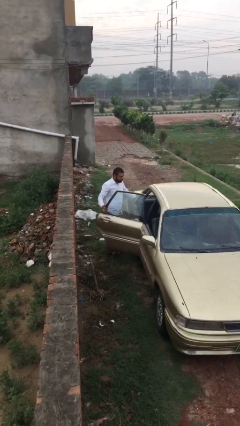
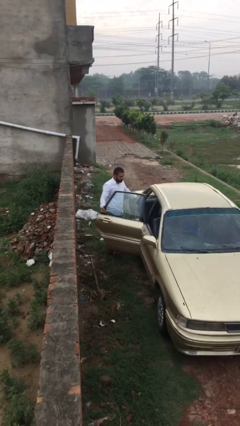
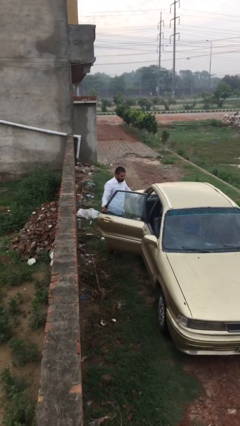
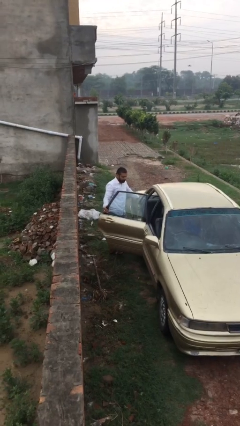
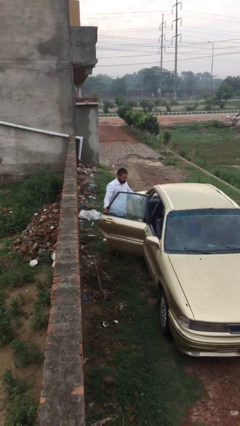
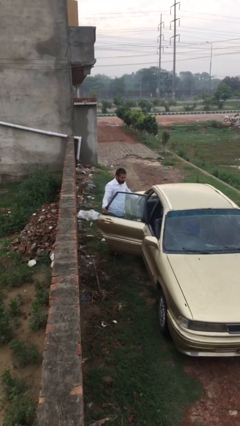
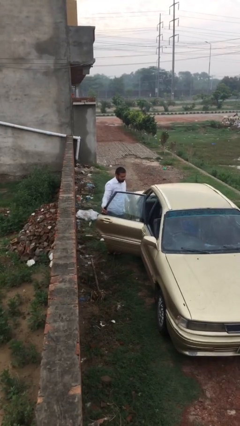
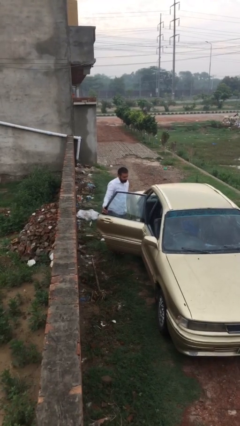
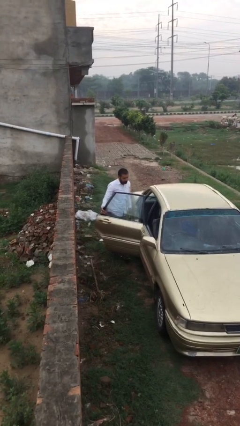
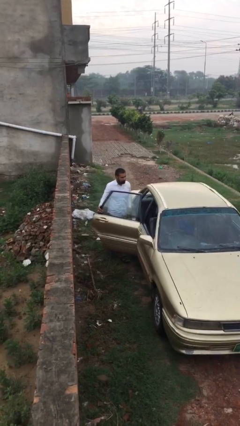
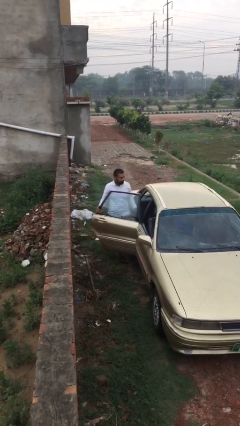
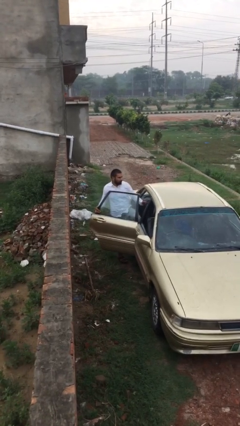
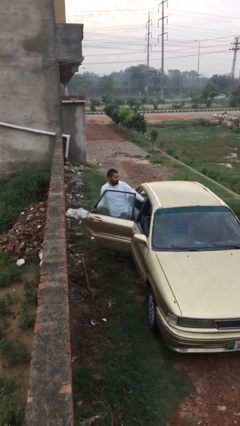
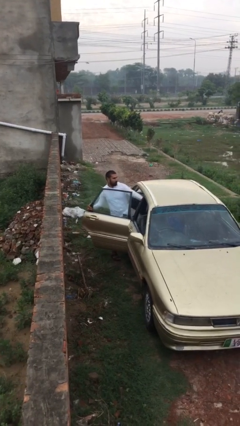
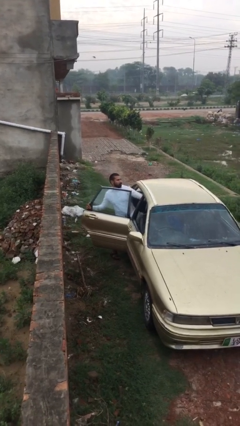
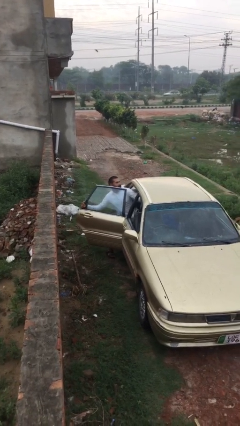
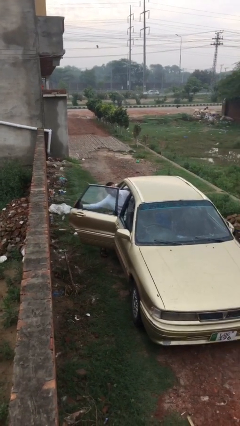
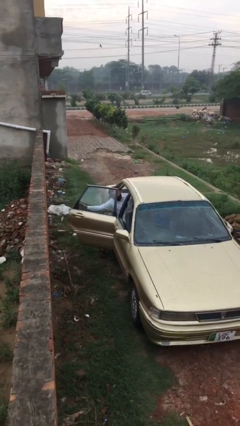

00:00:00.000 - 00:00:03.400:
person enters car

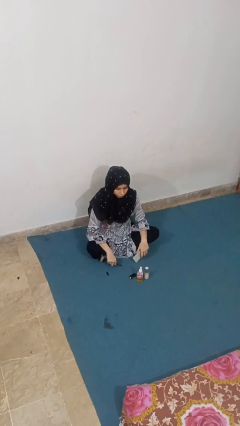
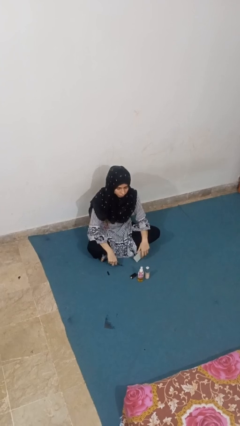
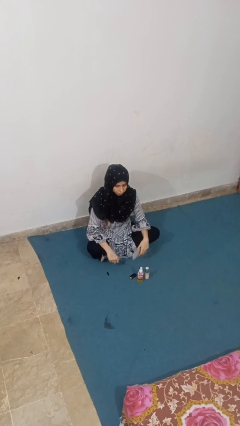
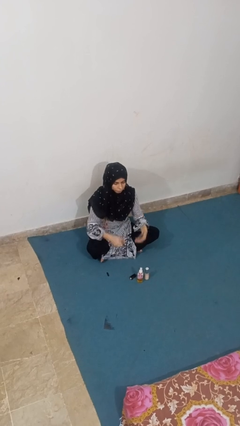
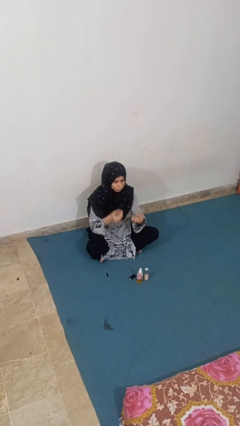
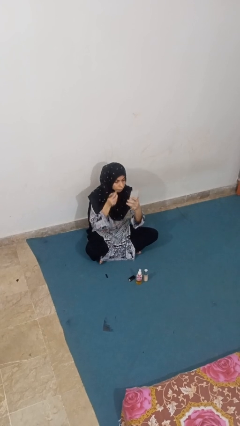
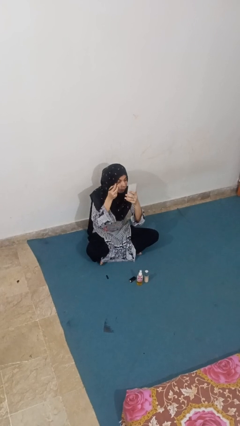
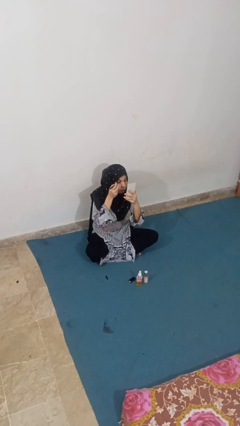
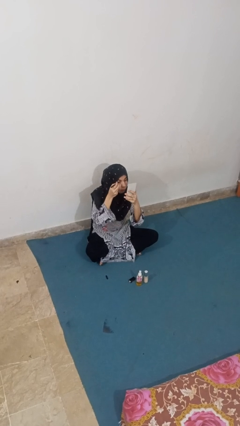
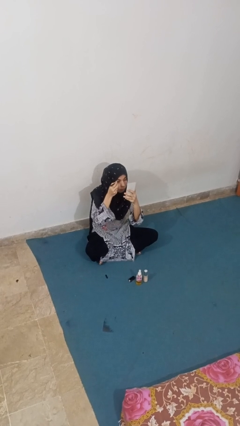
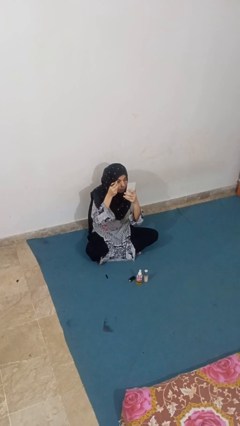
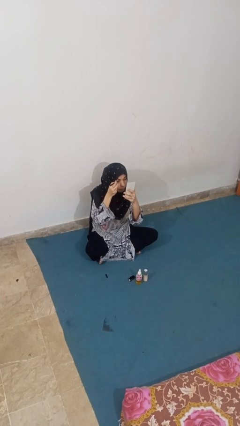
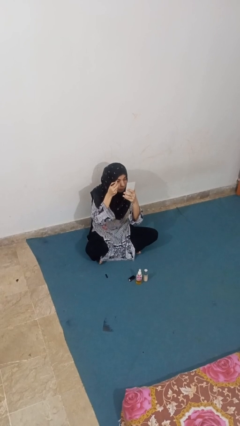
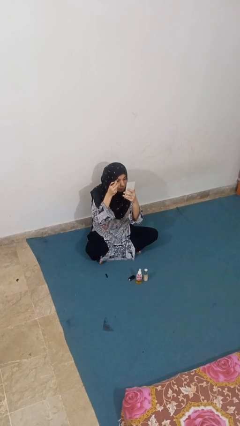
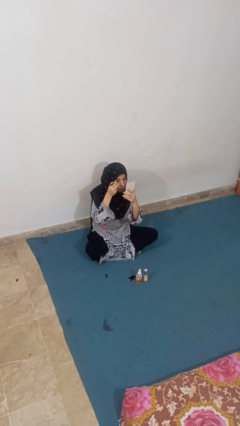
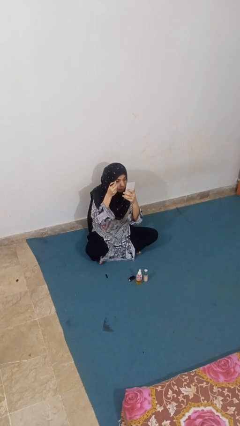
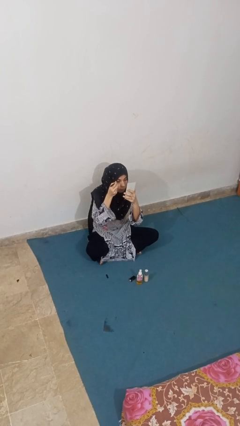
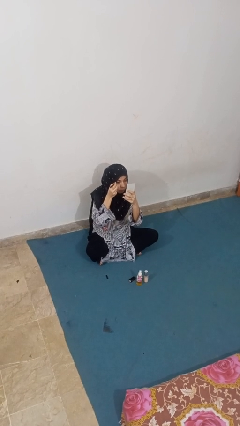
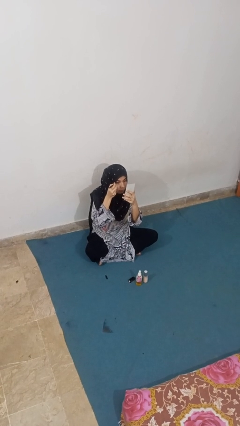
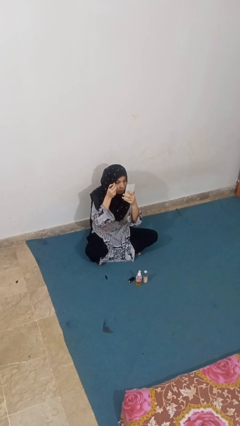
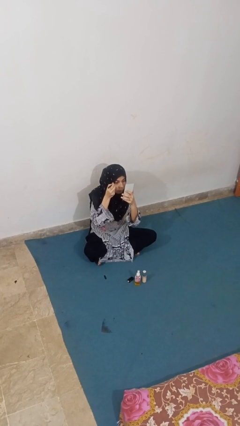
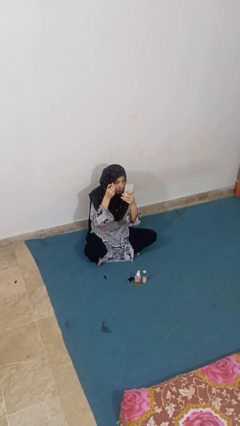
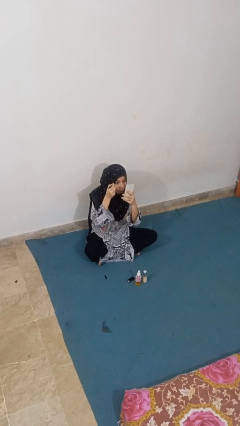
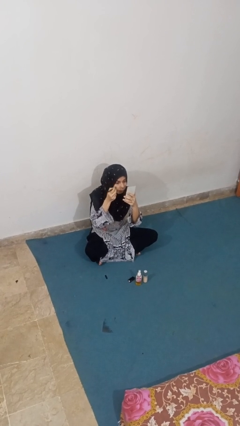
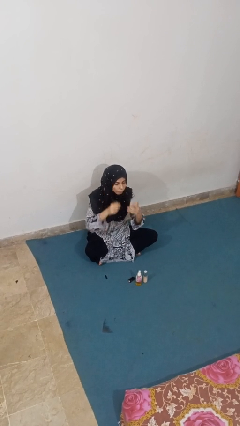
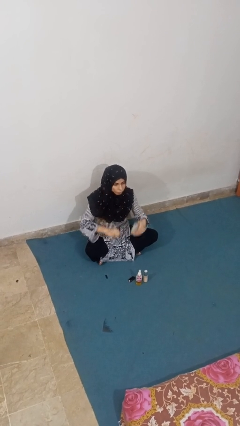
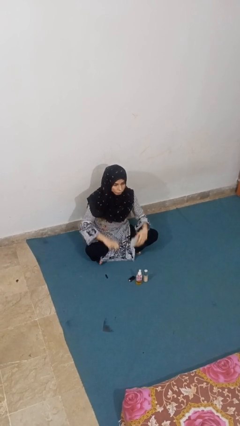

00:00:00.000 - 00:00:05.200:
person applies eye makeup

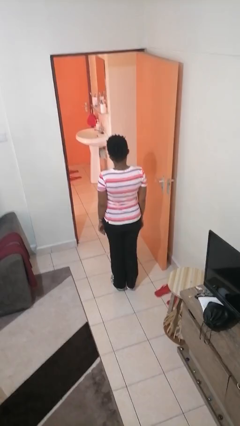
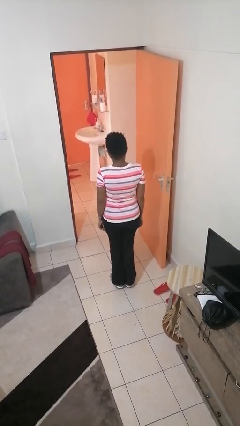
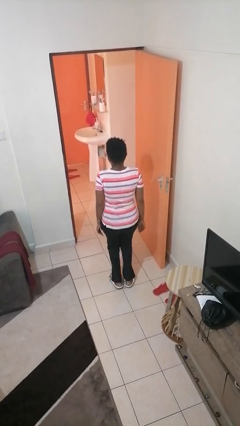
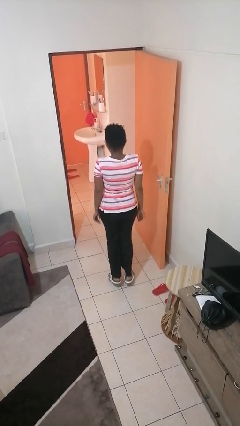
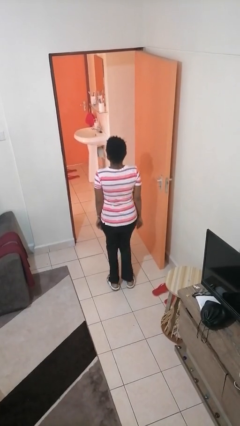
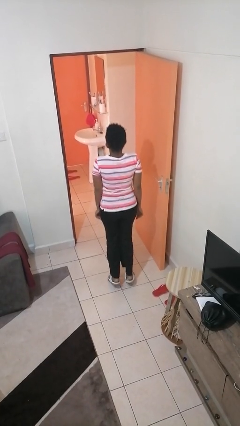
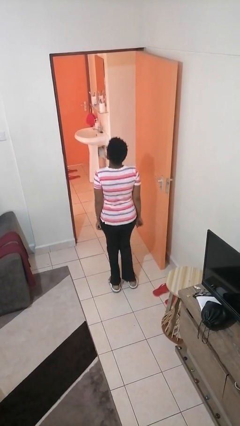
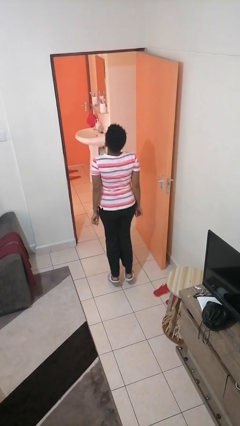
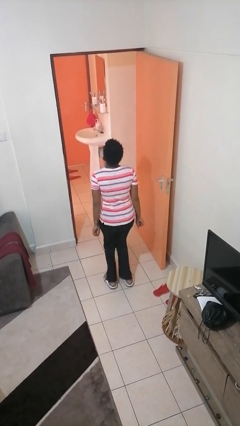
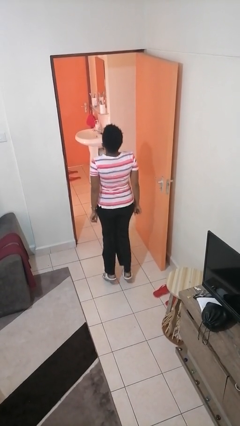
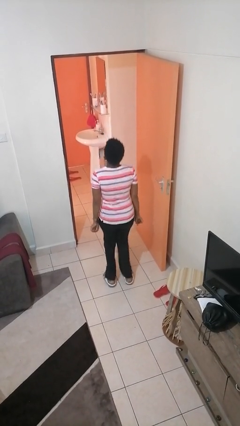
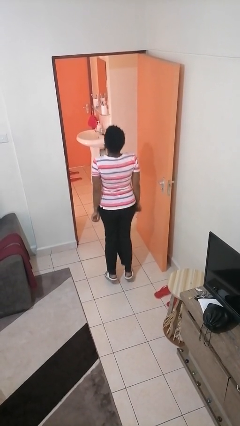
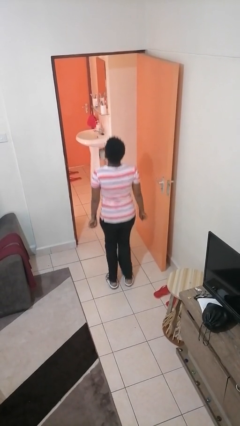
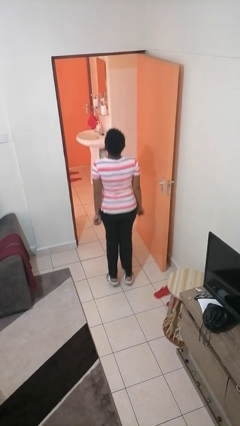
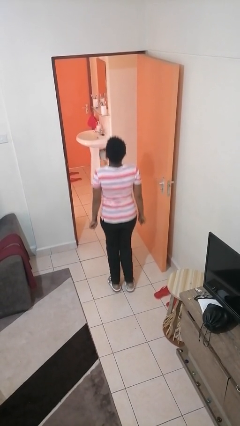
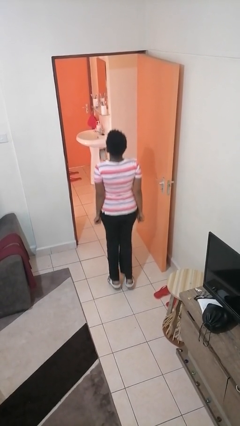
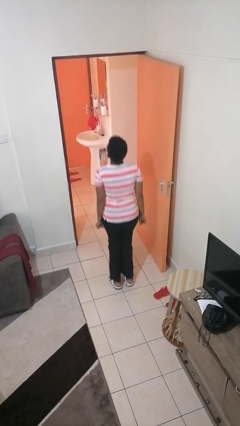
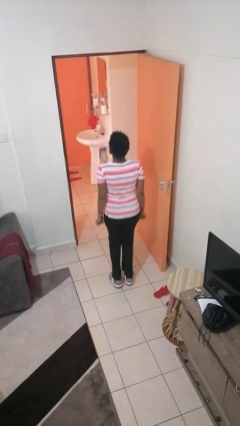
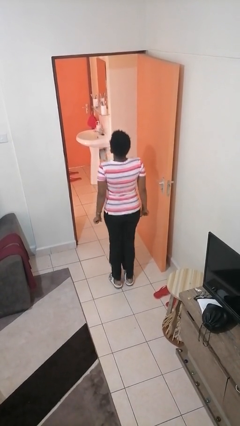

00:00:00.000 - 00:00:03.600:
person jumps

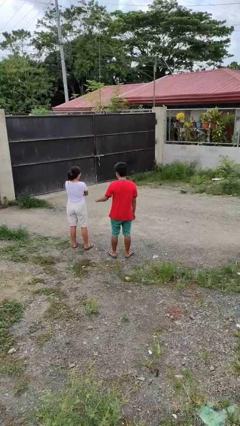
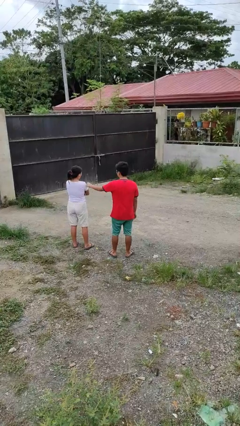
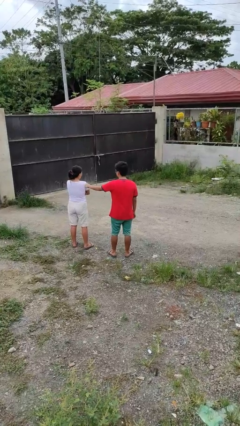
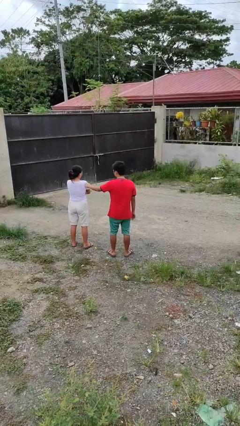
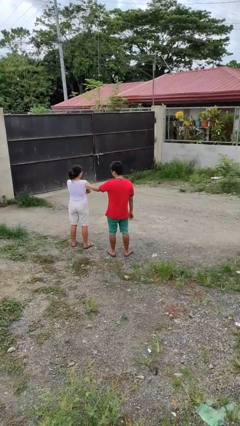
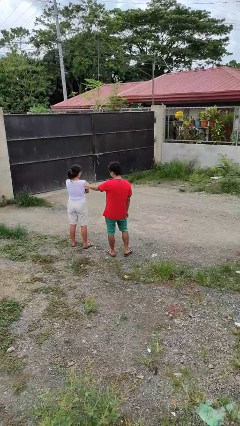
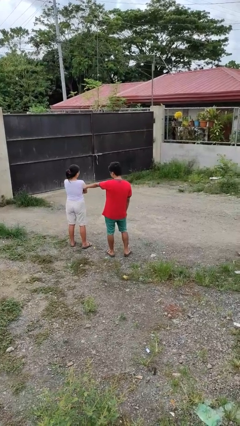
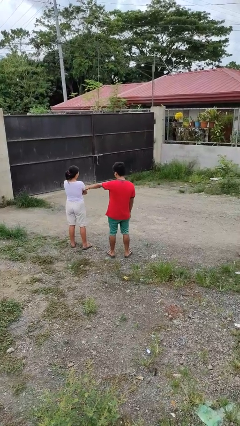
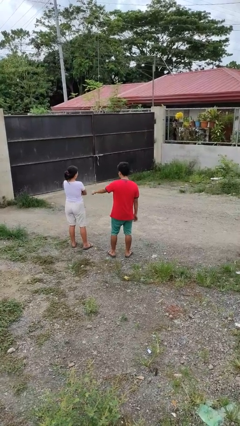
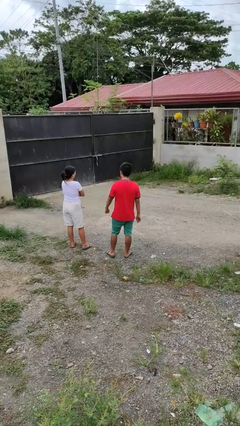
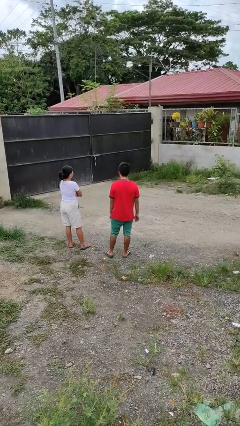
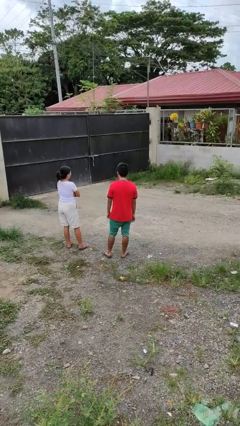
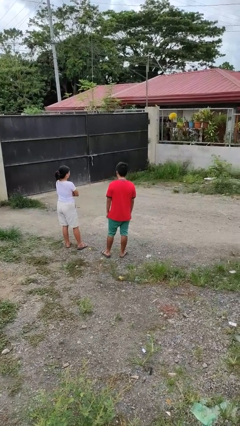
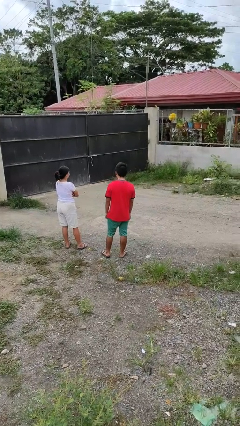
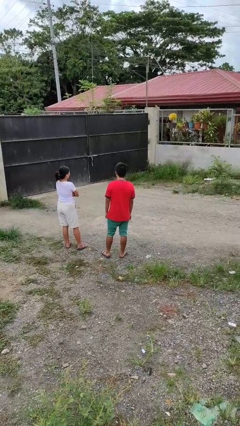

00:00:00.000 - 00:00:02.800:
person pounds shoulders of person

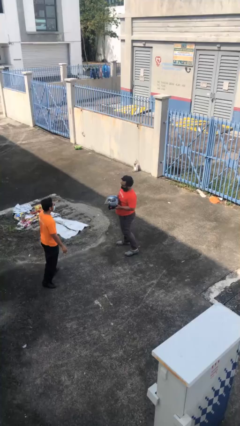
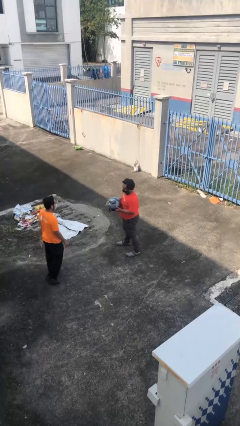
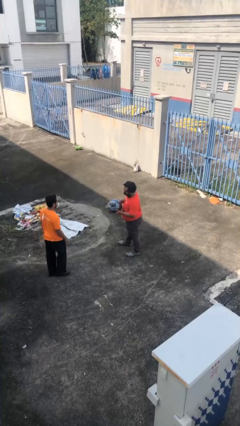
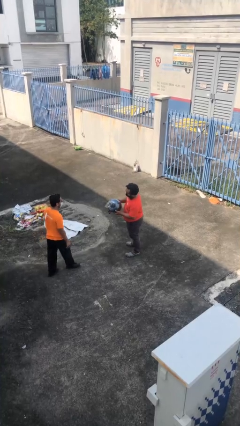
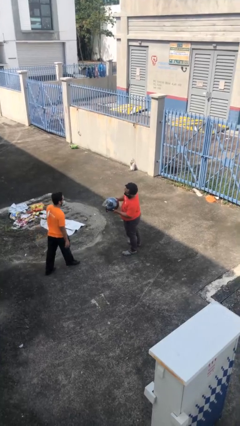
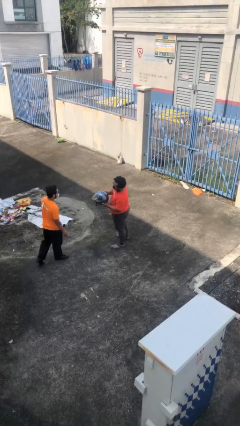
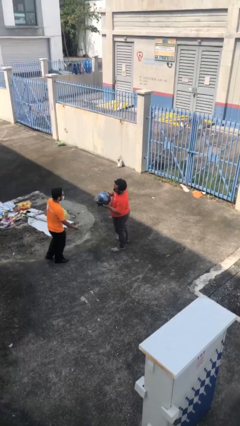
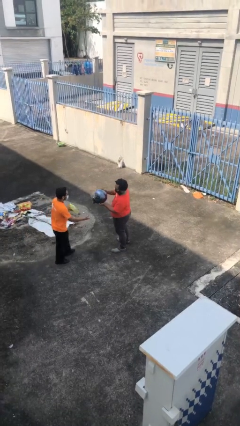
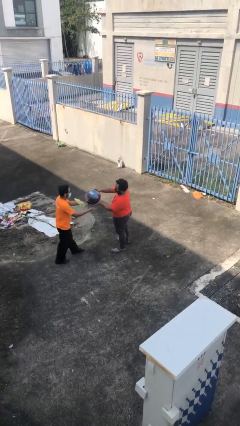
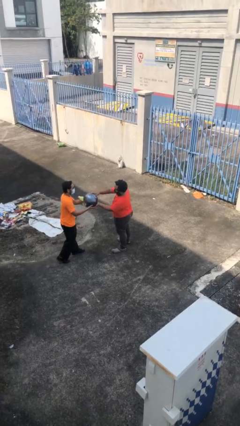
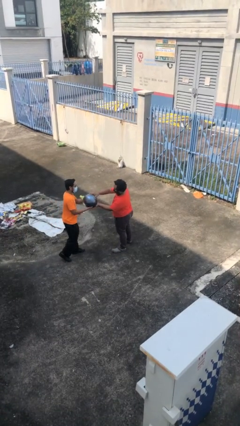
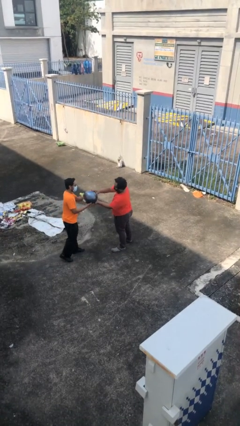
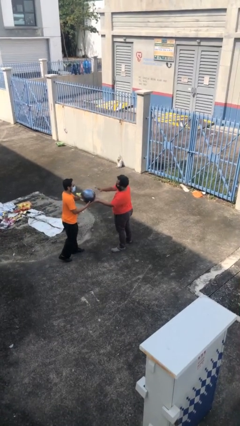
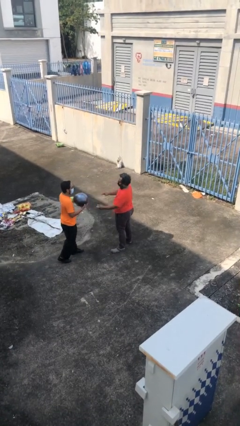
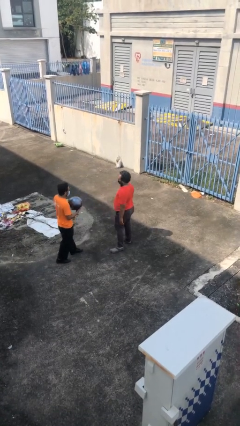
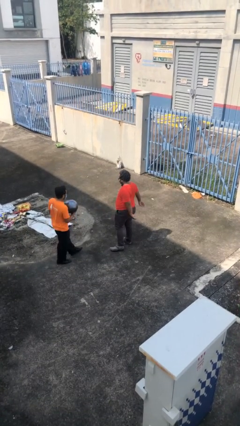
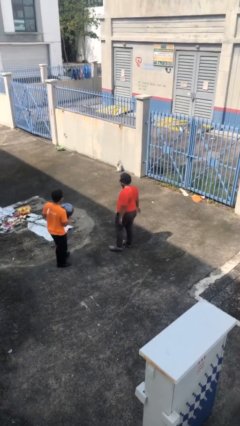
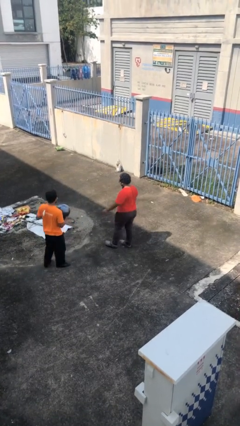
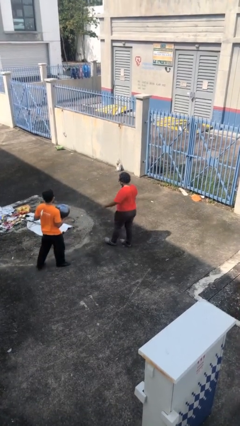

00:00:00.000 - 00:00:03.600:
person transfers object to person
